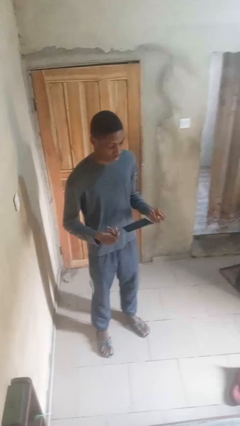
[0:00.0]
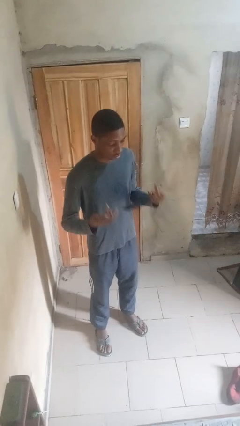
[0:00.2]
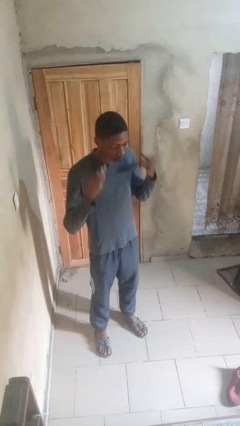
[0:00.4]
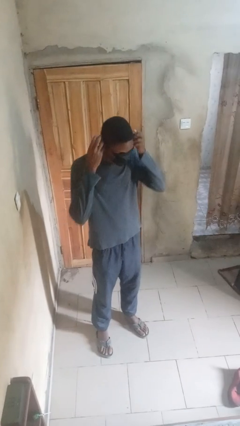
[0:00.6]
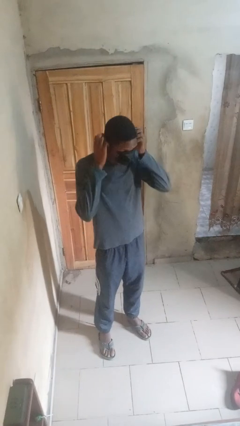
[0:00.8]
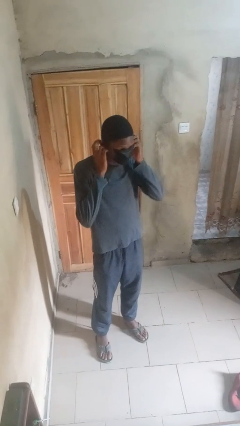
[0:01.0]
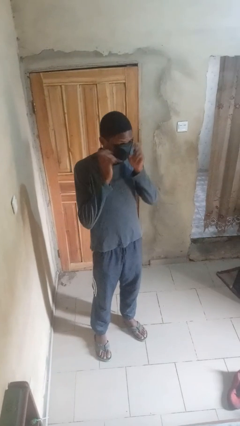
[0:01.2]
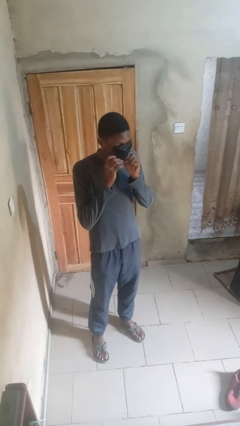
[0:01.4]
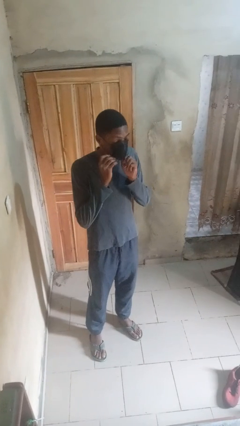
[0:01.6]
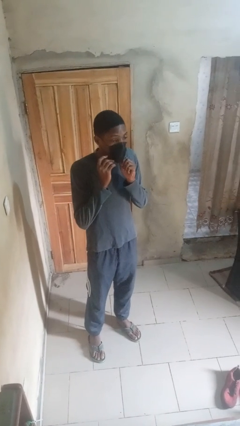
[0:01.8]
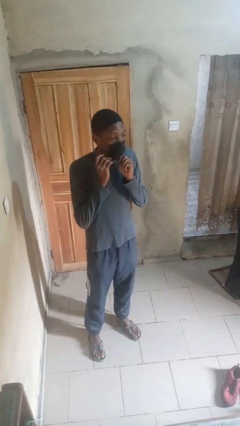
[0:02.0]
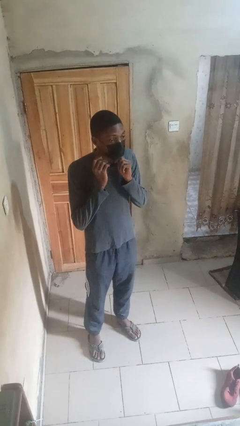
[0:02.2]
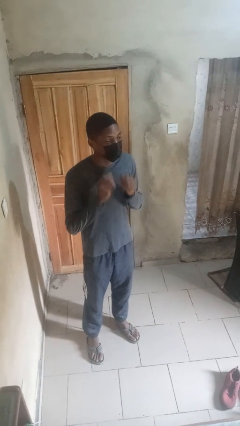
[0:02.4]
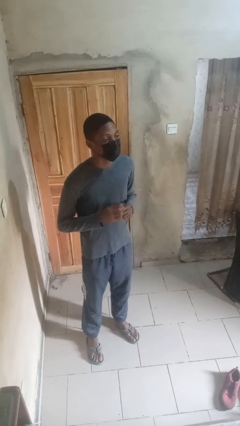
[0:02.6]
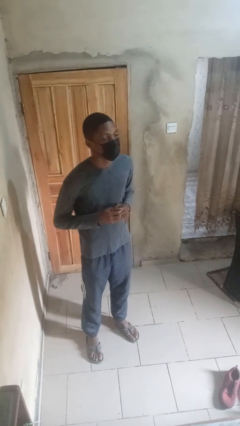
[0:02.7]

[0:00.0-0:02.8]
person puts on facemask

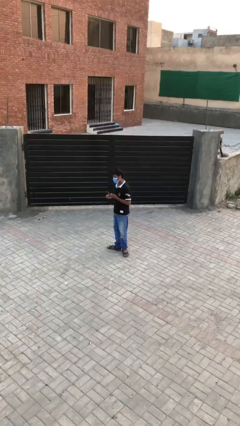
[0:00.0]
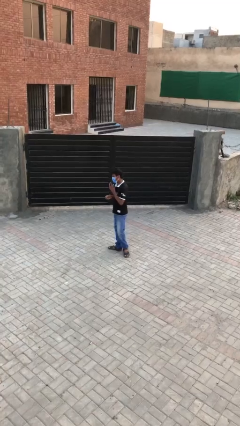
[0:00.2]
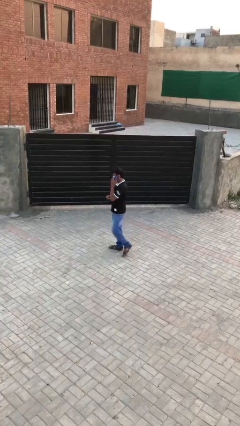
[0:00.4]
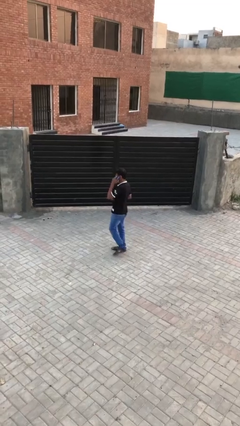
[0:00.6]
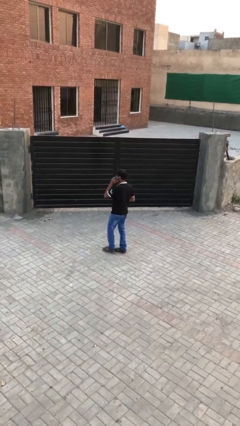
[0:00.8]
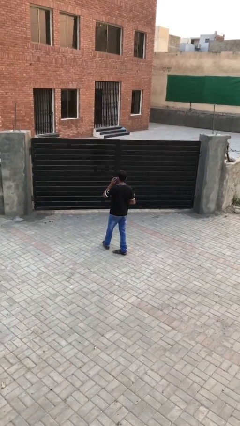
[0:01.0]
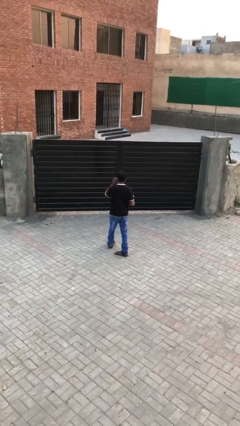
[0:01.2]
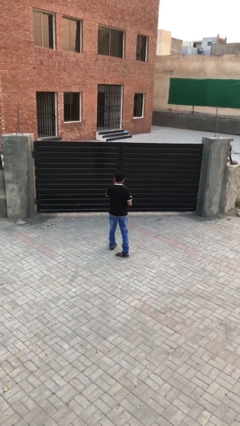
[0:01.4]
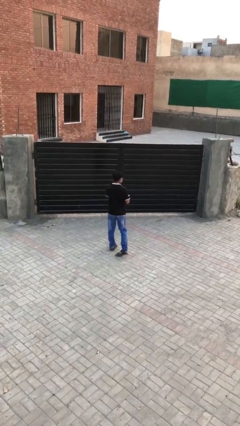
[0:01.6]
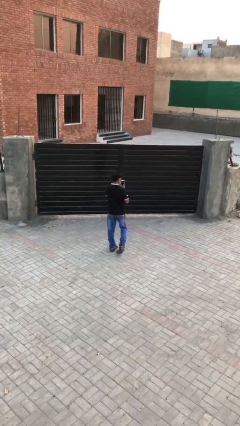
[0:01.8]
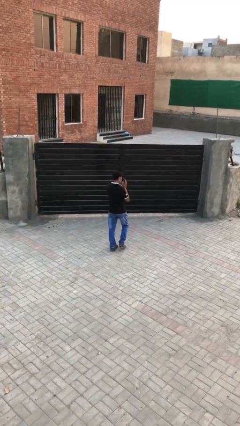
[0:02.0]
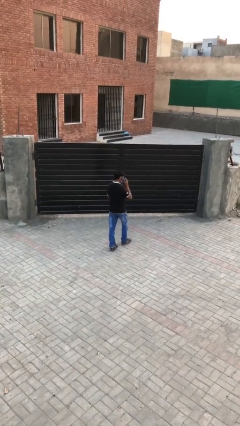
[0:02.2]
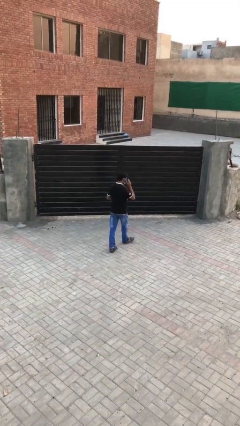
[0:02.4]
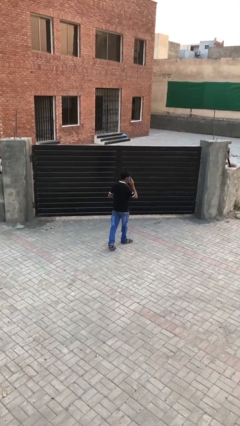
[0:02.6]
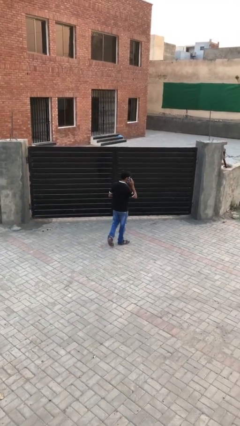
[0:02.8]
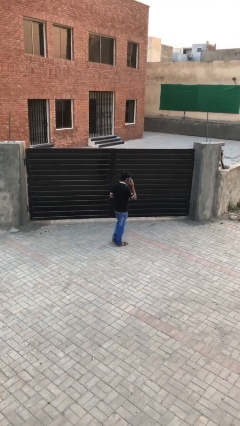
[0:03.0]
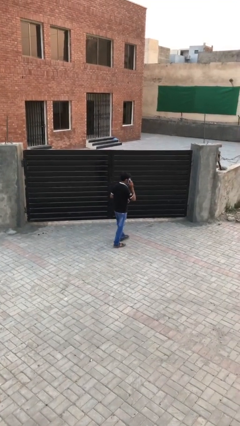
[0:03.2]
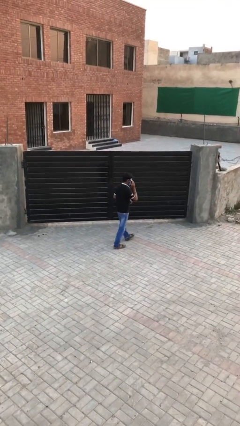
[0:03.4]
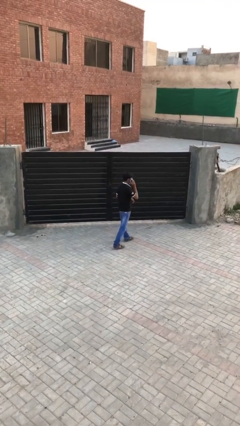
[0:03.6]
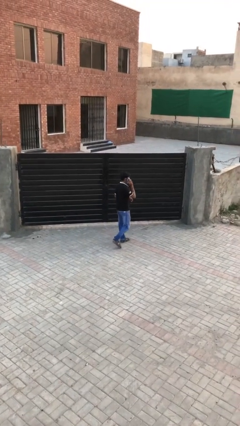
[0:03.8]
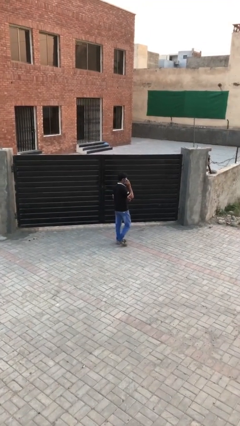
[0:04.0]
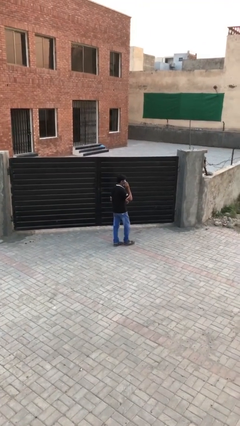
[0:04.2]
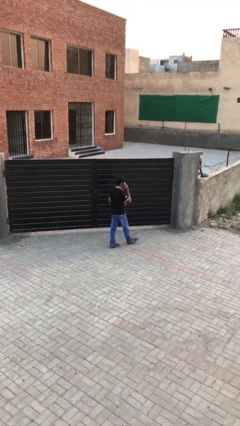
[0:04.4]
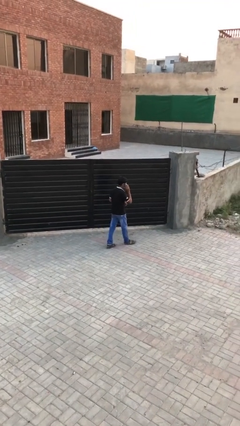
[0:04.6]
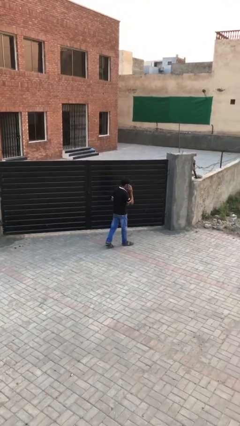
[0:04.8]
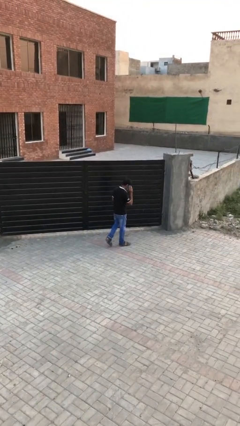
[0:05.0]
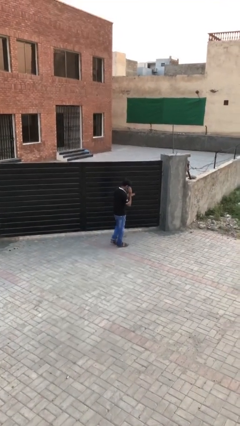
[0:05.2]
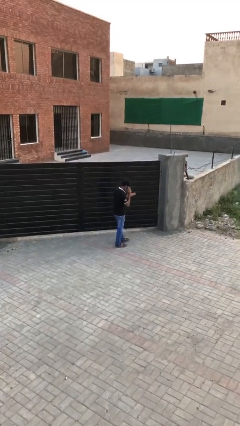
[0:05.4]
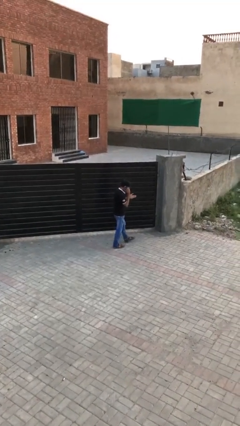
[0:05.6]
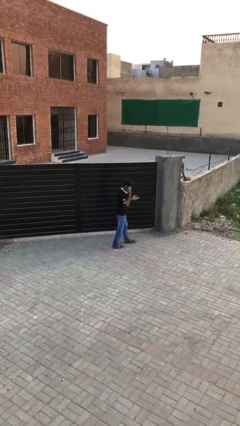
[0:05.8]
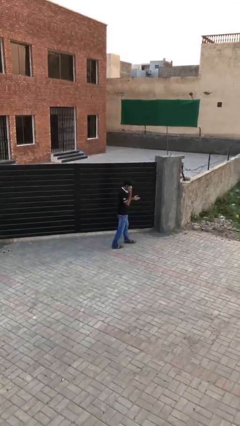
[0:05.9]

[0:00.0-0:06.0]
person talks on phone

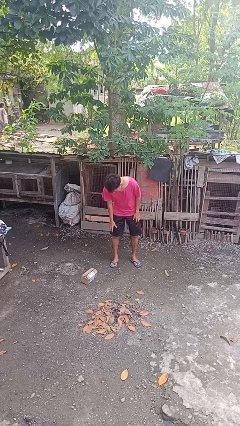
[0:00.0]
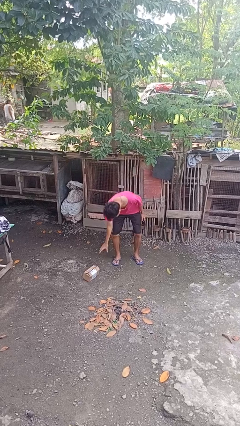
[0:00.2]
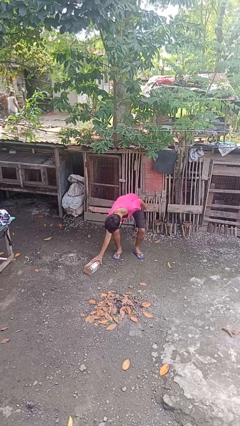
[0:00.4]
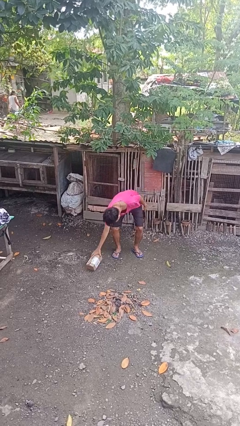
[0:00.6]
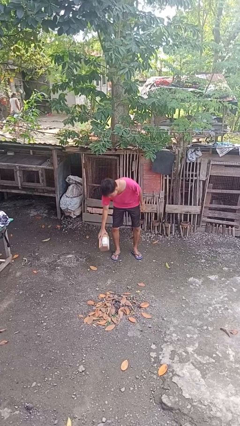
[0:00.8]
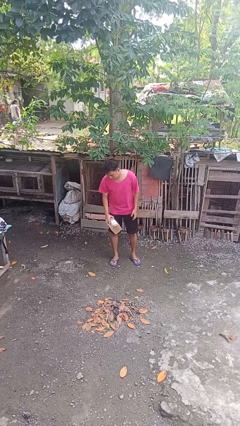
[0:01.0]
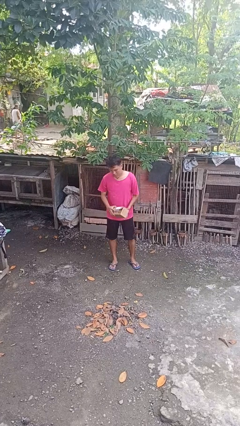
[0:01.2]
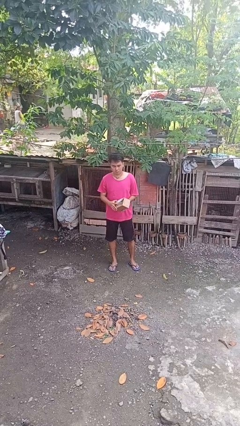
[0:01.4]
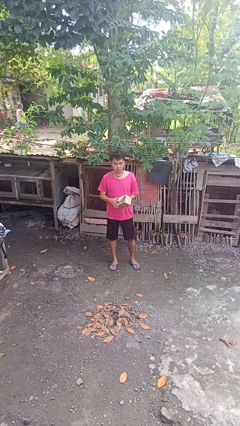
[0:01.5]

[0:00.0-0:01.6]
person picks up object from floor

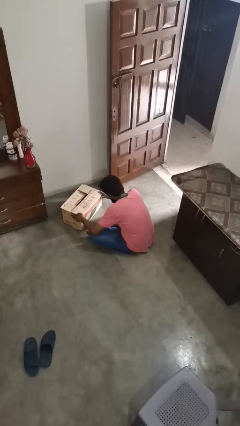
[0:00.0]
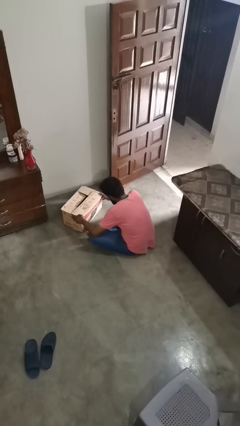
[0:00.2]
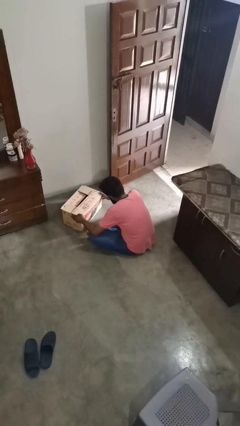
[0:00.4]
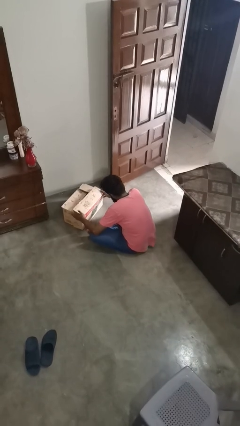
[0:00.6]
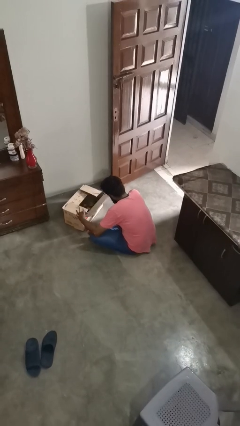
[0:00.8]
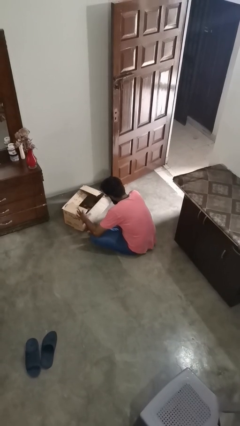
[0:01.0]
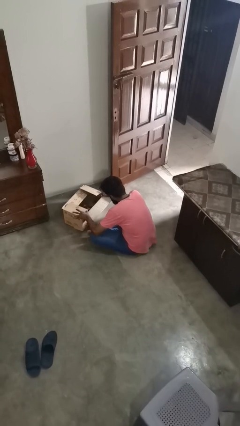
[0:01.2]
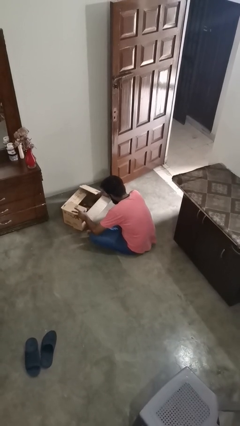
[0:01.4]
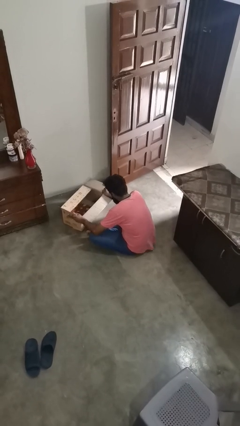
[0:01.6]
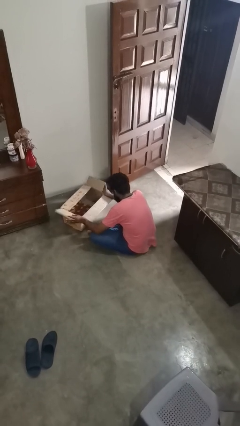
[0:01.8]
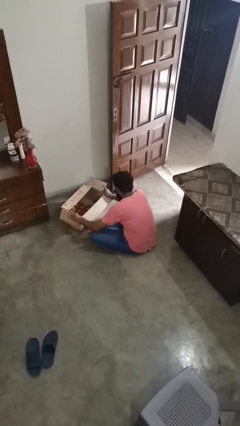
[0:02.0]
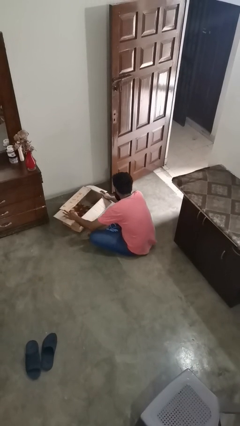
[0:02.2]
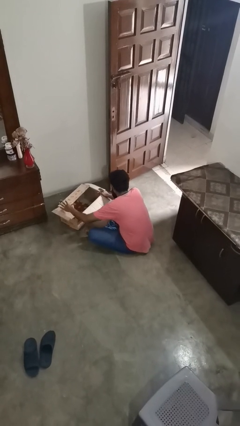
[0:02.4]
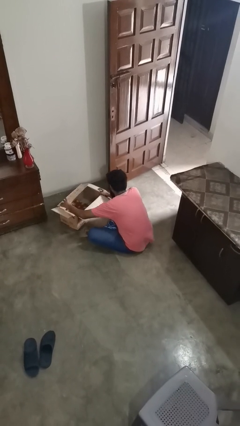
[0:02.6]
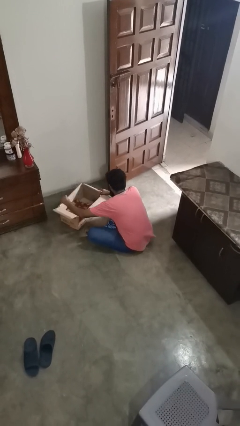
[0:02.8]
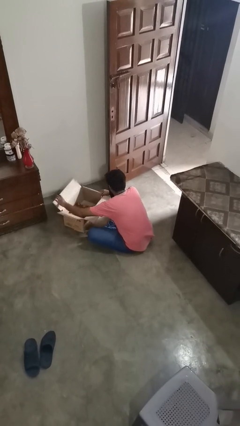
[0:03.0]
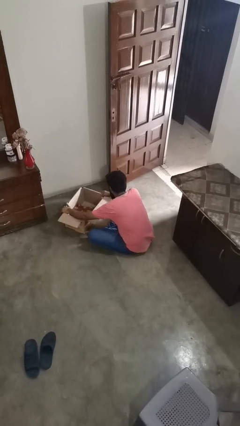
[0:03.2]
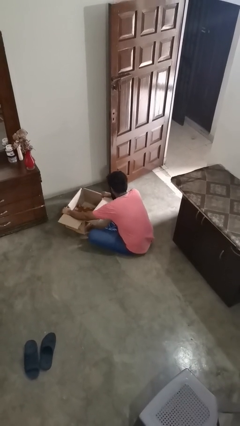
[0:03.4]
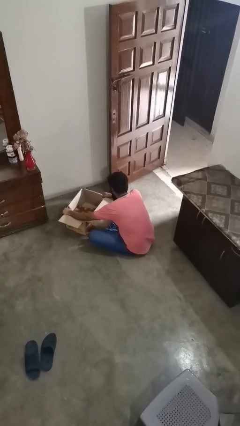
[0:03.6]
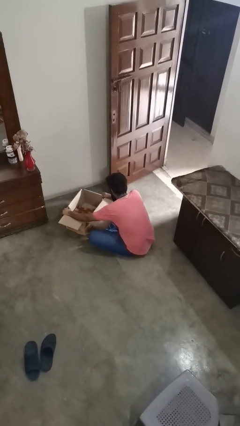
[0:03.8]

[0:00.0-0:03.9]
person opens box

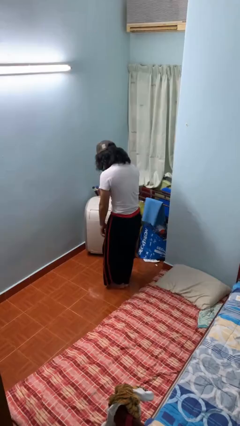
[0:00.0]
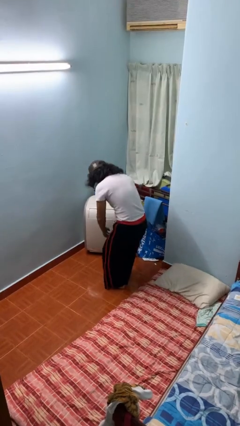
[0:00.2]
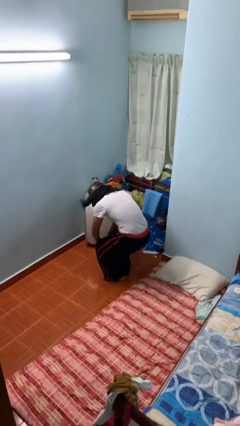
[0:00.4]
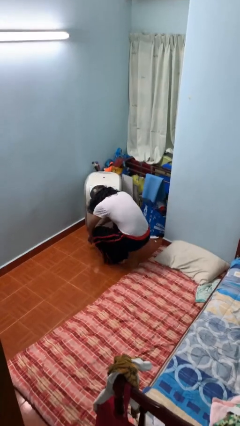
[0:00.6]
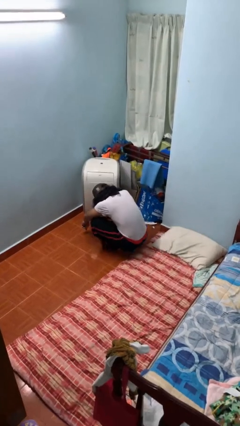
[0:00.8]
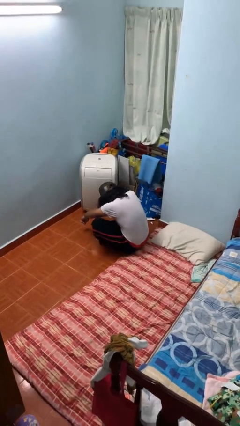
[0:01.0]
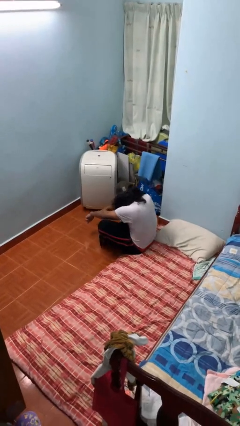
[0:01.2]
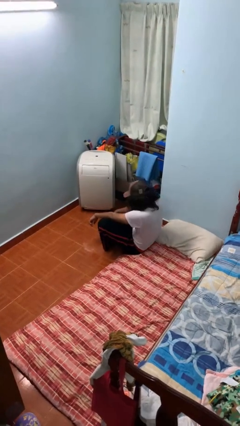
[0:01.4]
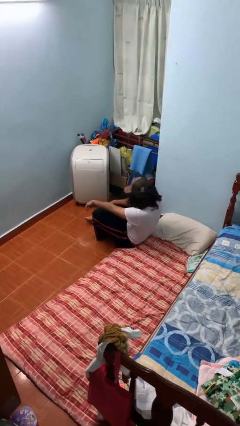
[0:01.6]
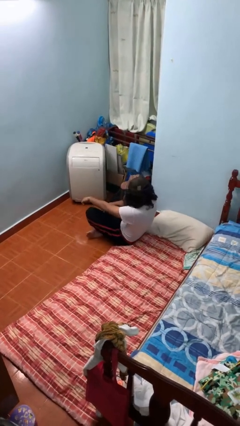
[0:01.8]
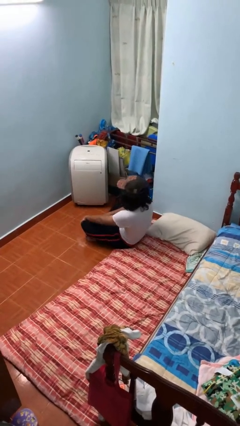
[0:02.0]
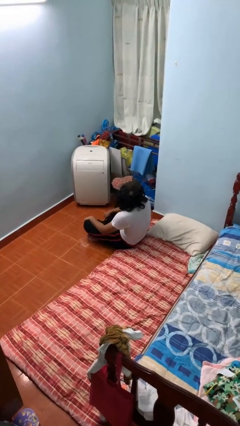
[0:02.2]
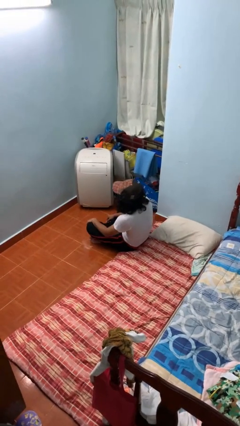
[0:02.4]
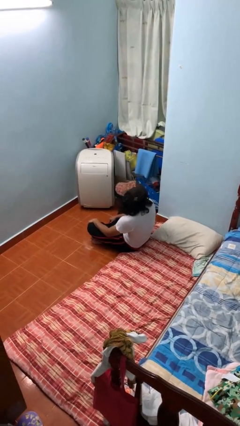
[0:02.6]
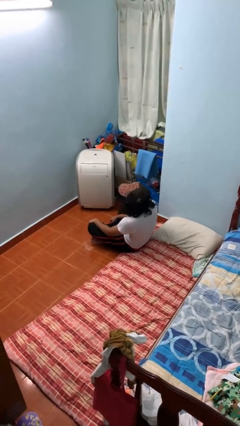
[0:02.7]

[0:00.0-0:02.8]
person sits crisscross

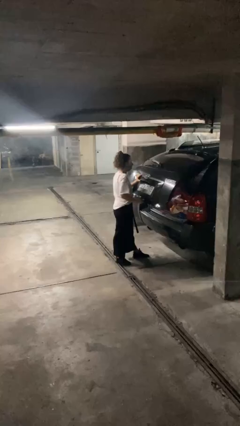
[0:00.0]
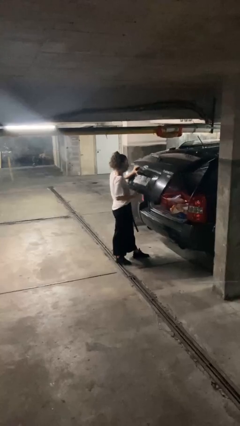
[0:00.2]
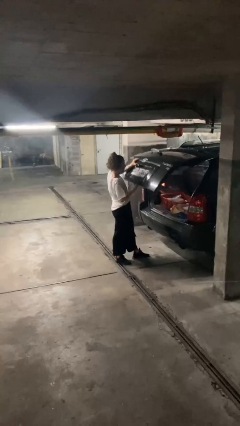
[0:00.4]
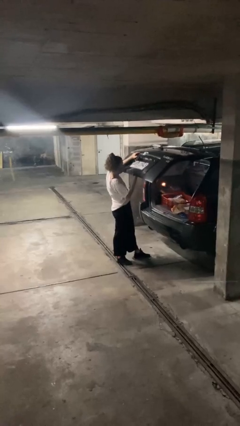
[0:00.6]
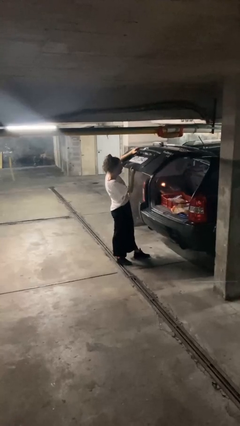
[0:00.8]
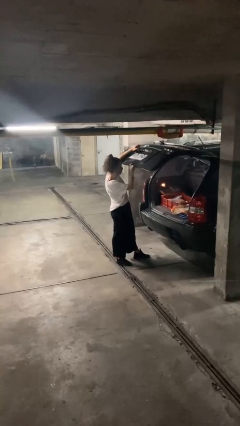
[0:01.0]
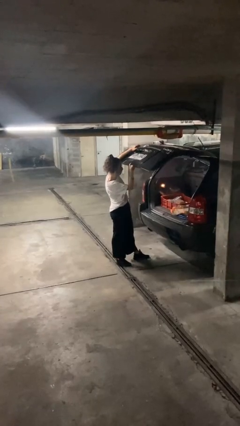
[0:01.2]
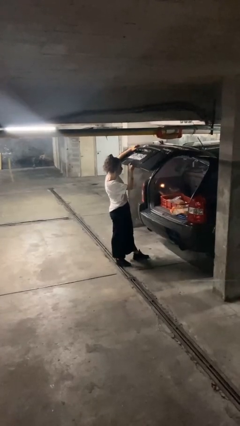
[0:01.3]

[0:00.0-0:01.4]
person opens car trunk
